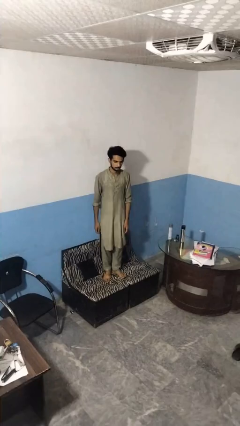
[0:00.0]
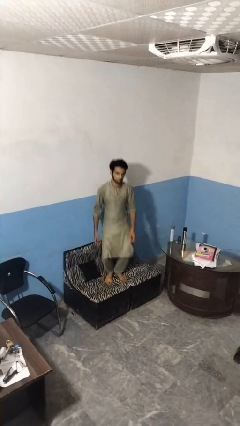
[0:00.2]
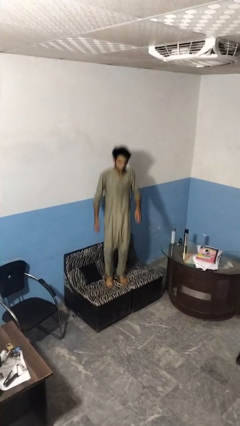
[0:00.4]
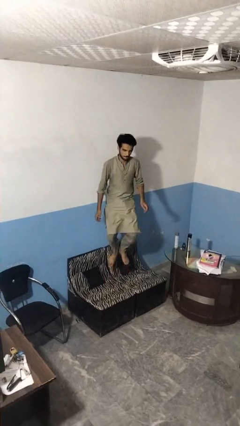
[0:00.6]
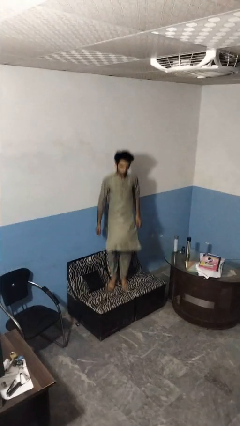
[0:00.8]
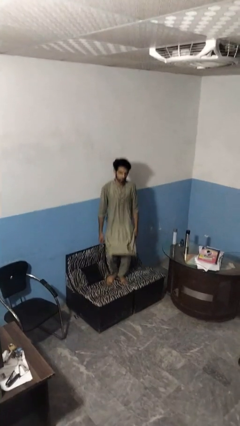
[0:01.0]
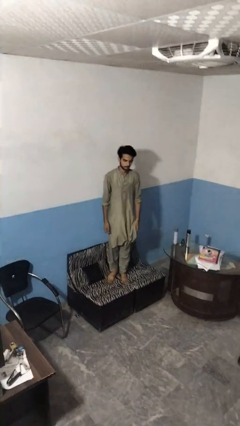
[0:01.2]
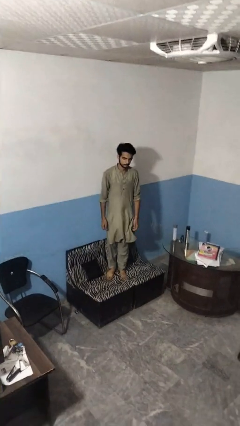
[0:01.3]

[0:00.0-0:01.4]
person jumps on couch

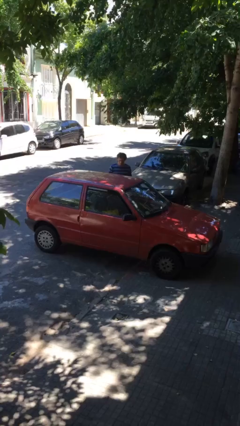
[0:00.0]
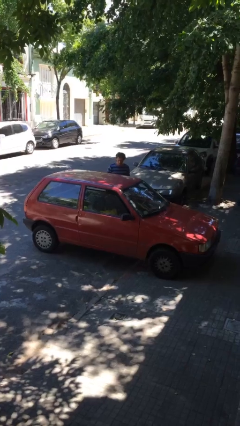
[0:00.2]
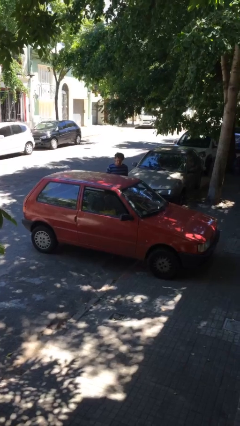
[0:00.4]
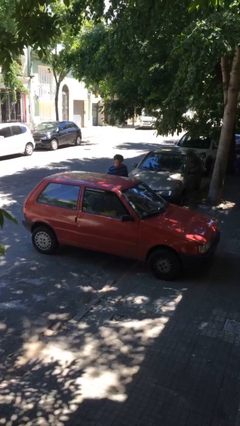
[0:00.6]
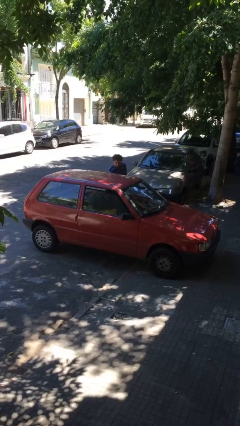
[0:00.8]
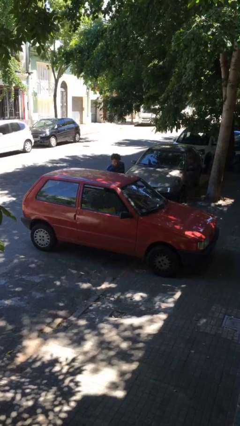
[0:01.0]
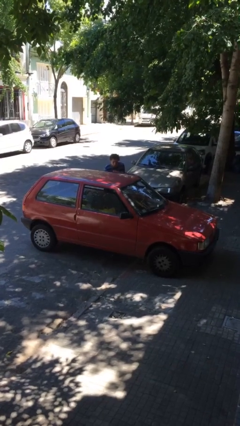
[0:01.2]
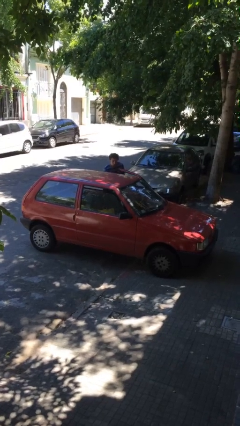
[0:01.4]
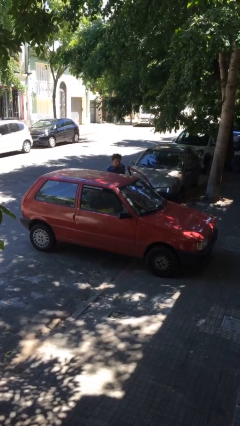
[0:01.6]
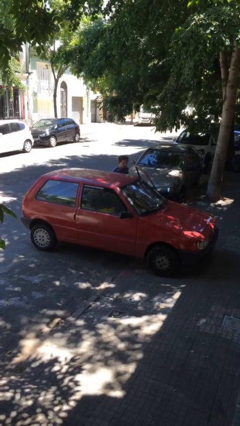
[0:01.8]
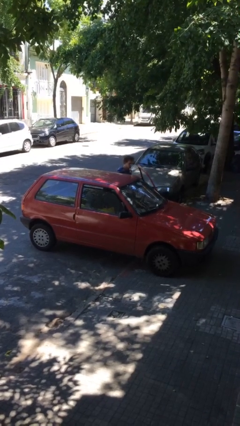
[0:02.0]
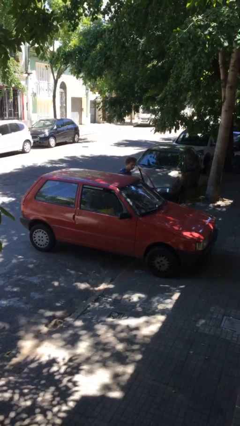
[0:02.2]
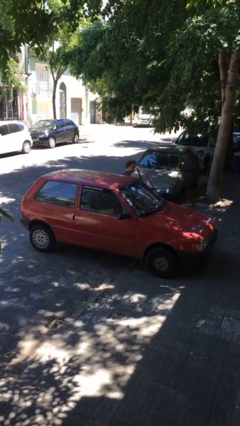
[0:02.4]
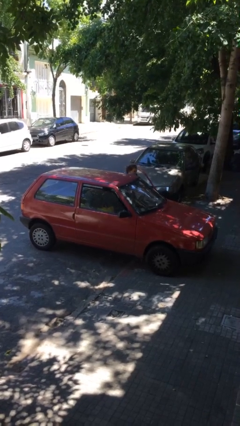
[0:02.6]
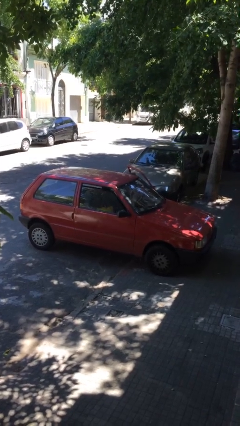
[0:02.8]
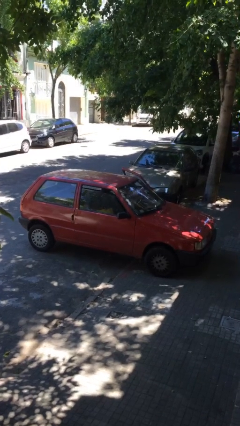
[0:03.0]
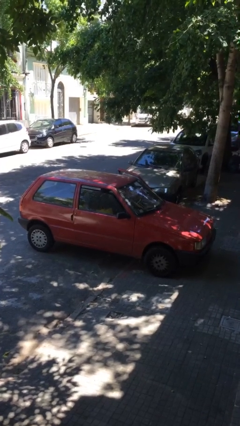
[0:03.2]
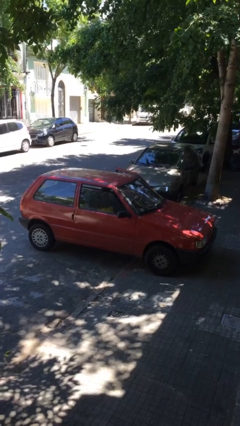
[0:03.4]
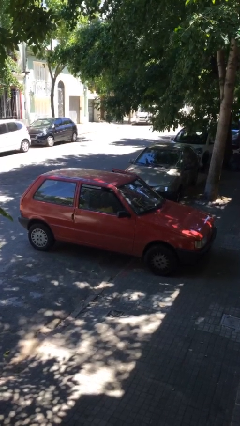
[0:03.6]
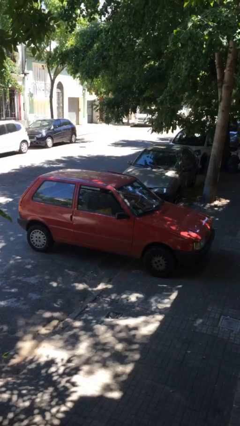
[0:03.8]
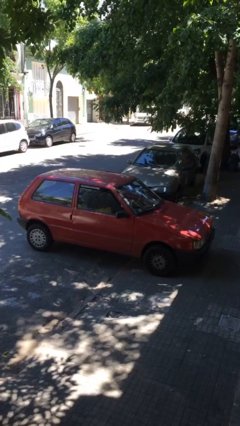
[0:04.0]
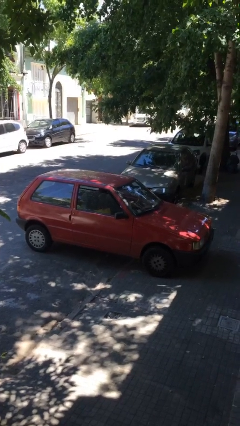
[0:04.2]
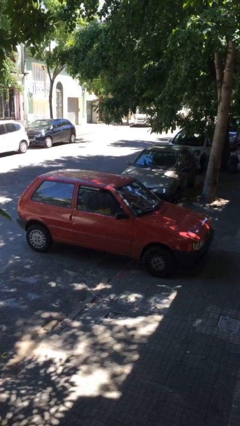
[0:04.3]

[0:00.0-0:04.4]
car picks up person

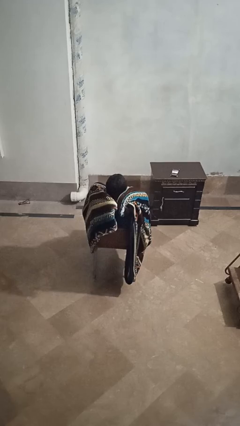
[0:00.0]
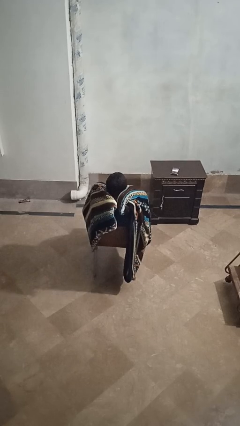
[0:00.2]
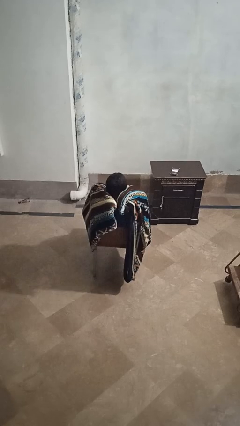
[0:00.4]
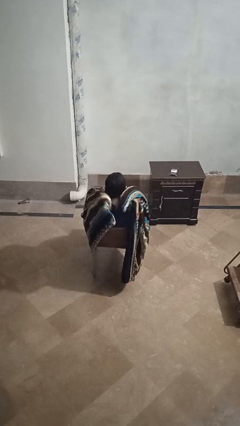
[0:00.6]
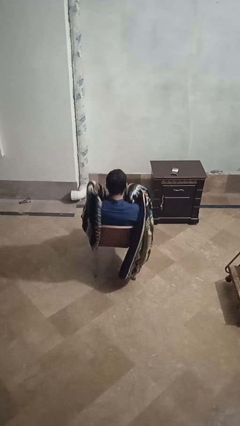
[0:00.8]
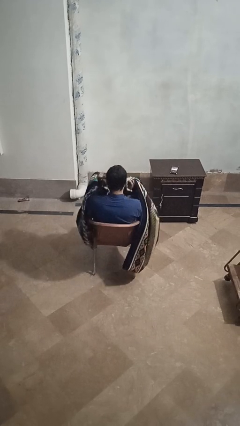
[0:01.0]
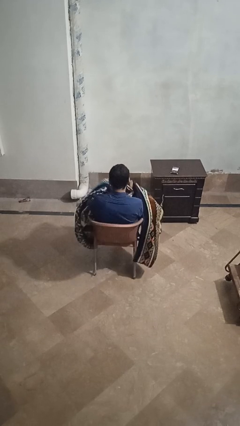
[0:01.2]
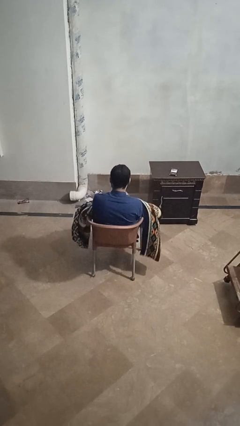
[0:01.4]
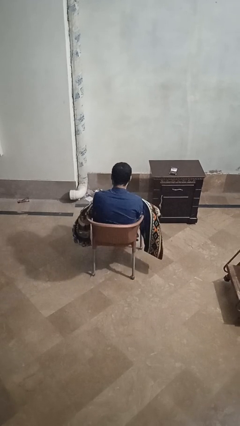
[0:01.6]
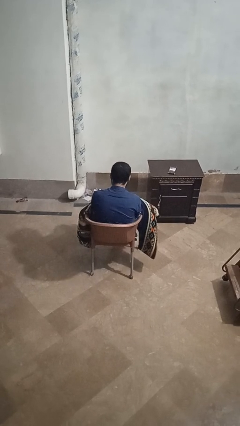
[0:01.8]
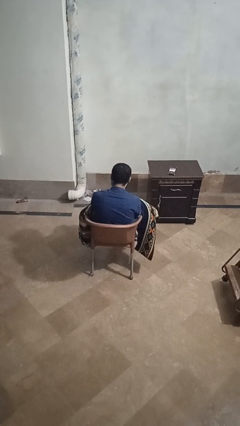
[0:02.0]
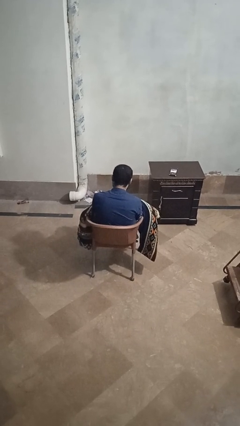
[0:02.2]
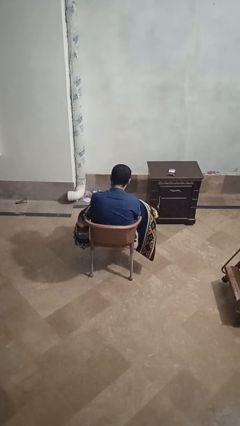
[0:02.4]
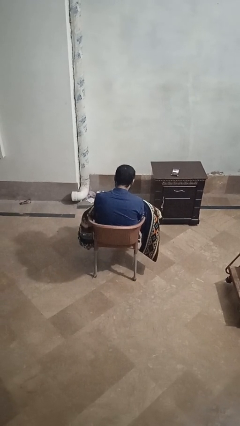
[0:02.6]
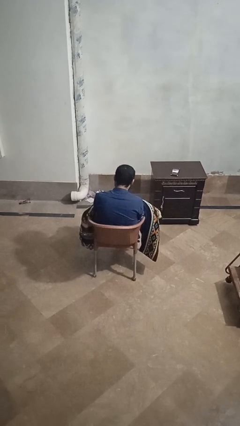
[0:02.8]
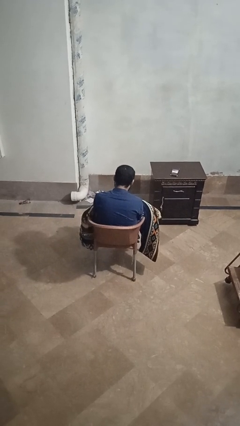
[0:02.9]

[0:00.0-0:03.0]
person uncovers with blanket

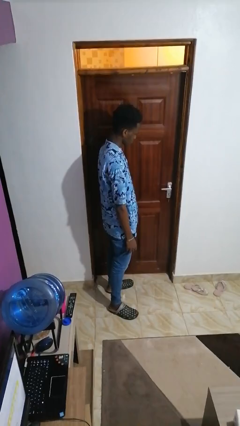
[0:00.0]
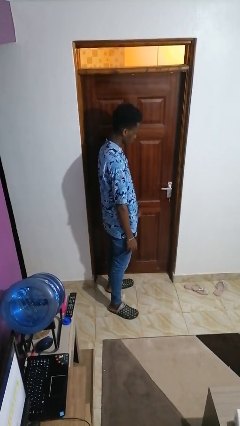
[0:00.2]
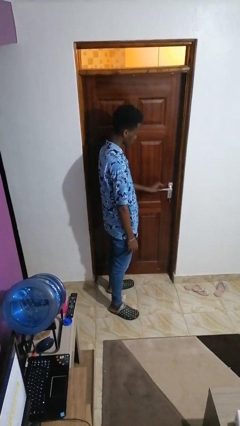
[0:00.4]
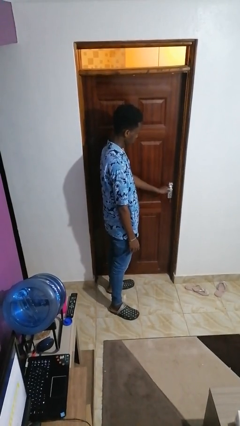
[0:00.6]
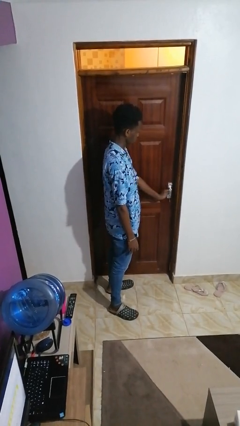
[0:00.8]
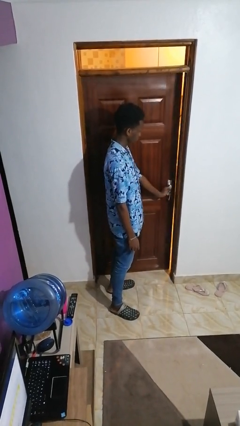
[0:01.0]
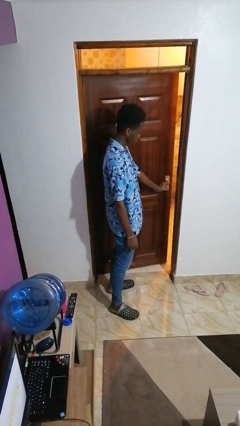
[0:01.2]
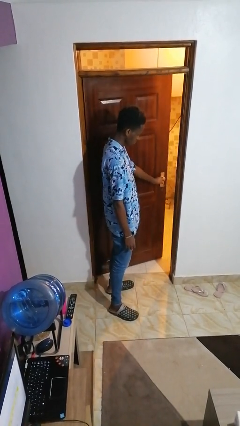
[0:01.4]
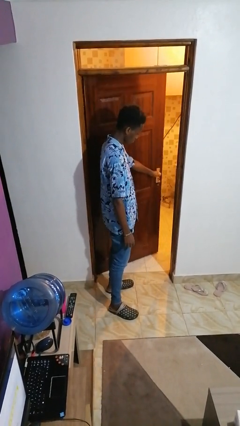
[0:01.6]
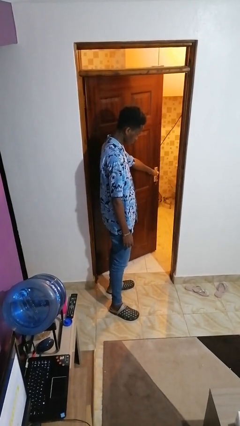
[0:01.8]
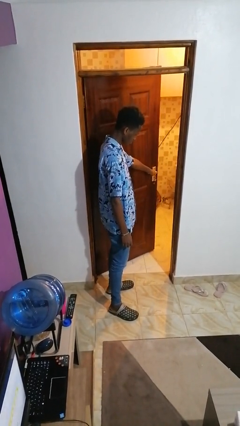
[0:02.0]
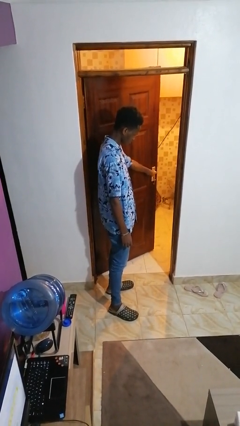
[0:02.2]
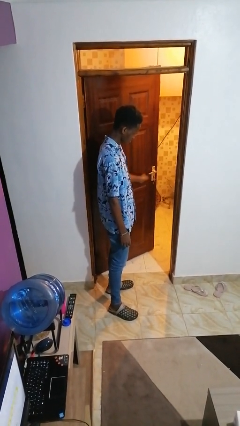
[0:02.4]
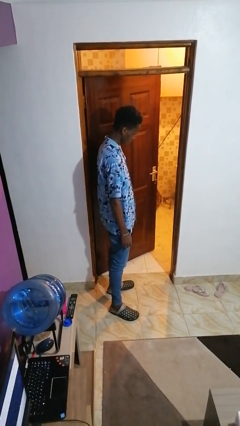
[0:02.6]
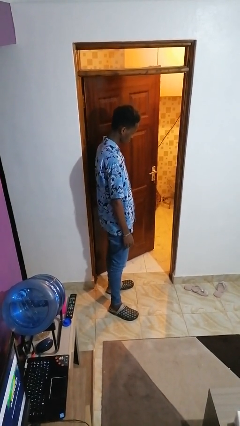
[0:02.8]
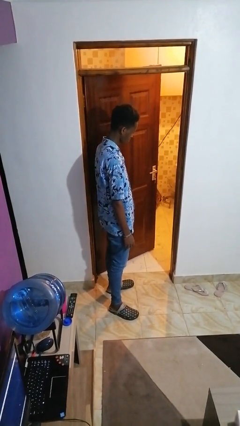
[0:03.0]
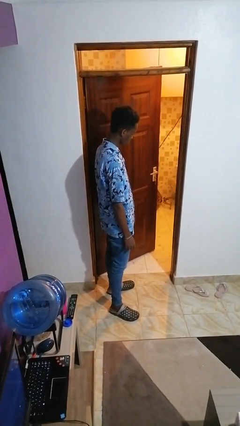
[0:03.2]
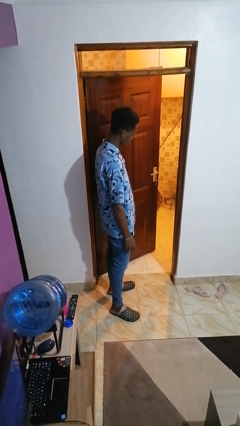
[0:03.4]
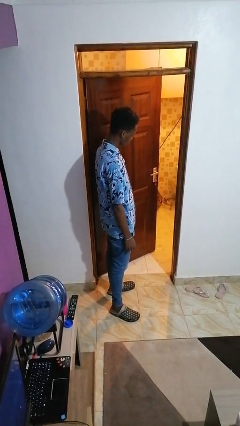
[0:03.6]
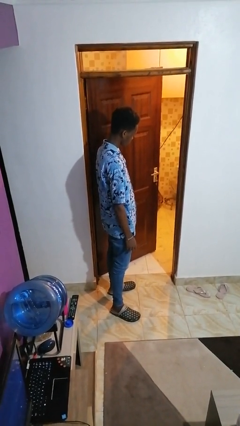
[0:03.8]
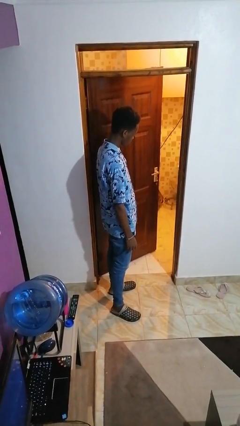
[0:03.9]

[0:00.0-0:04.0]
person opens facility door

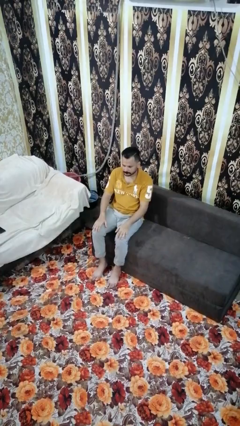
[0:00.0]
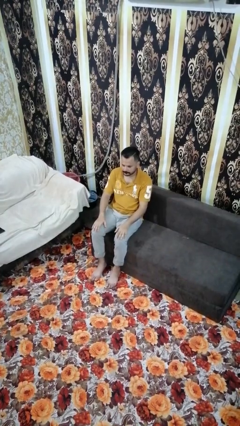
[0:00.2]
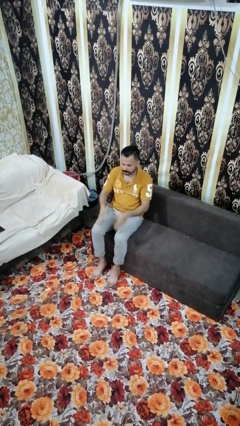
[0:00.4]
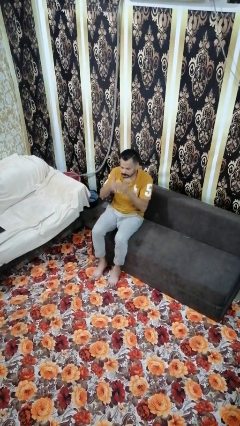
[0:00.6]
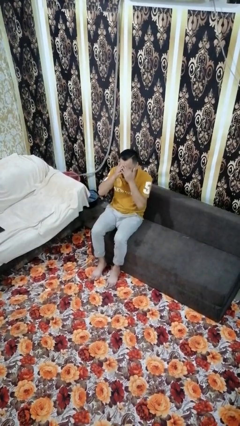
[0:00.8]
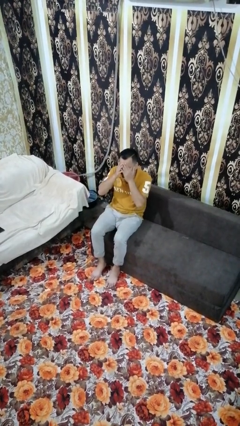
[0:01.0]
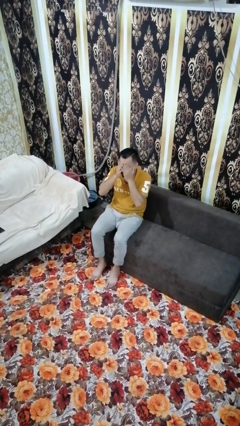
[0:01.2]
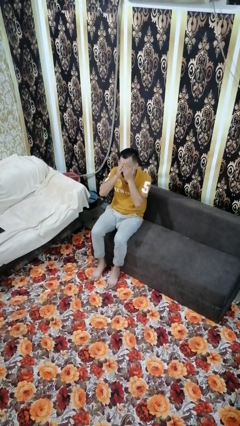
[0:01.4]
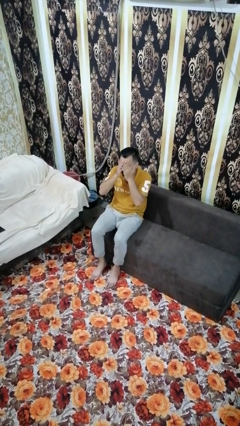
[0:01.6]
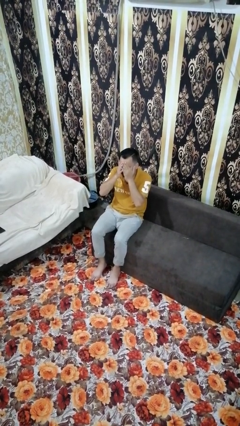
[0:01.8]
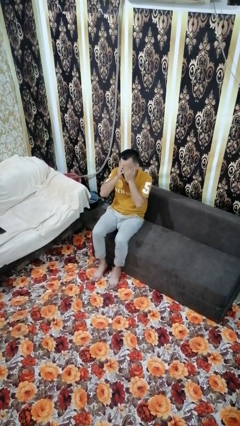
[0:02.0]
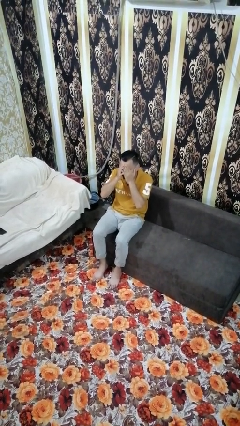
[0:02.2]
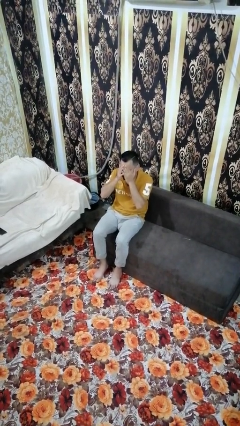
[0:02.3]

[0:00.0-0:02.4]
person covers face with hands

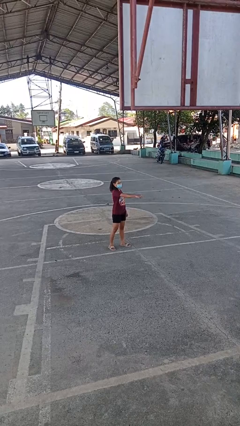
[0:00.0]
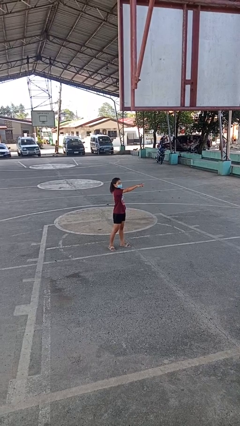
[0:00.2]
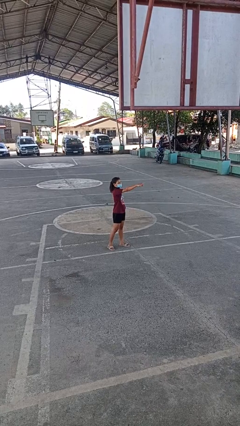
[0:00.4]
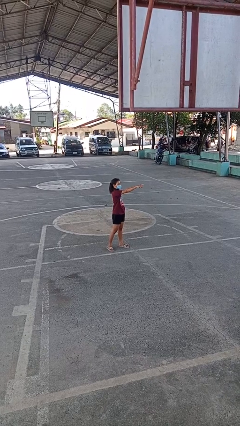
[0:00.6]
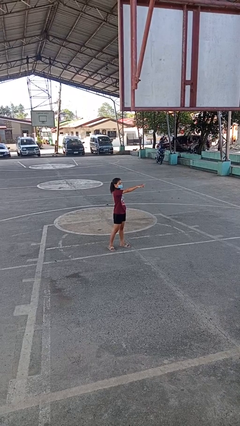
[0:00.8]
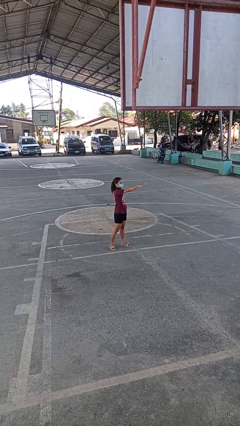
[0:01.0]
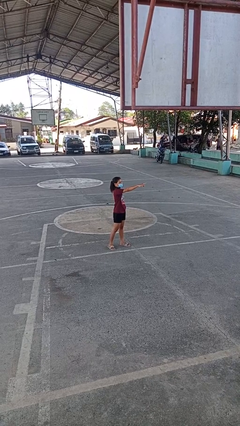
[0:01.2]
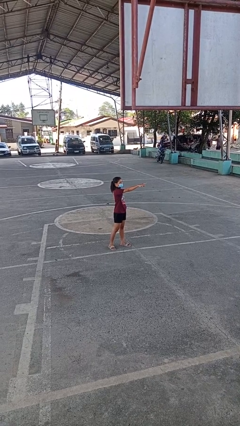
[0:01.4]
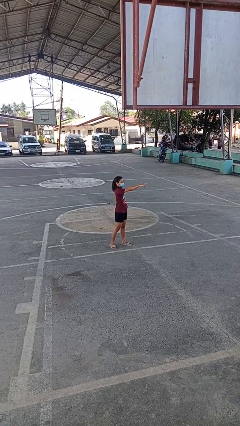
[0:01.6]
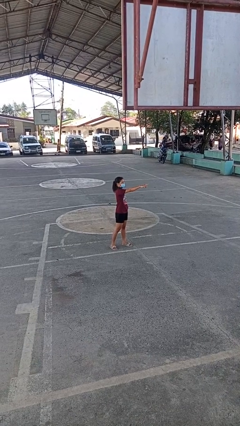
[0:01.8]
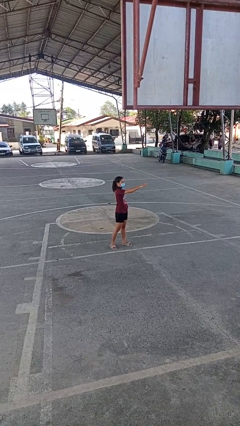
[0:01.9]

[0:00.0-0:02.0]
person points at person

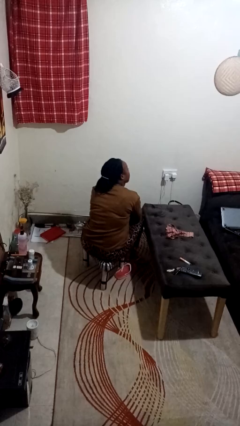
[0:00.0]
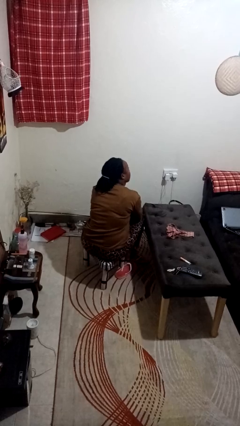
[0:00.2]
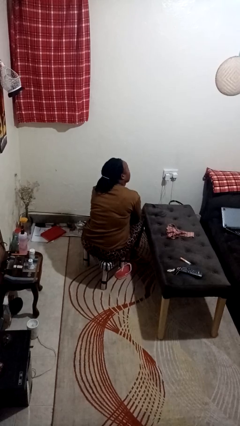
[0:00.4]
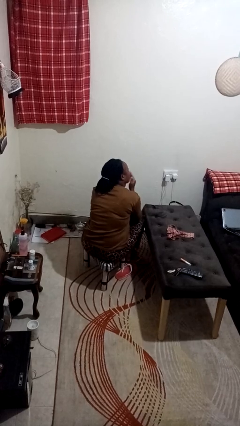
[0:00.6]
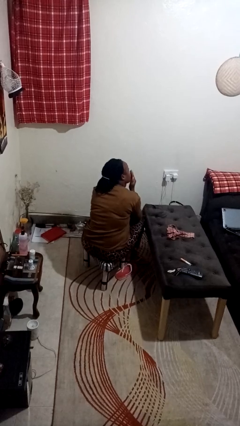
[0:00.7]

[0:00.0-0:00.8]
person gestures blow kiss
